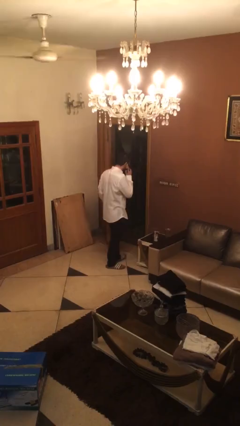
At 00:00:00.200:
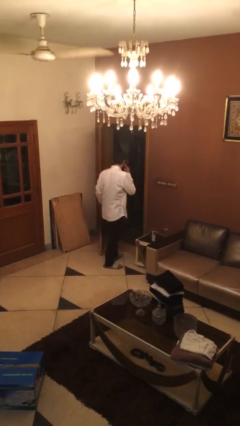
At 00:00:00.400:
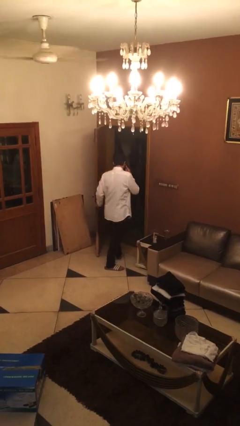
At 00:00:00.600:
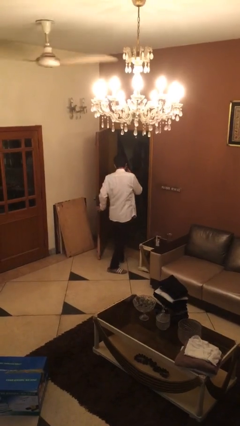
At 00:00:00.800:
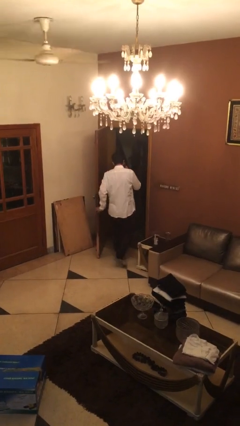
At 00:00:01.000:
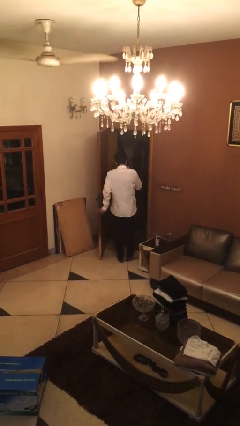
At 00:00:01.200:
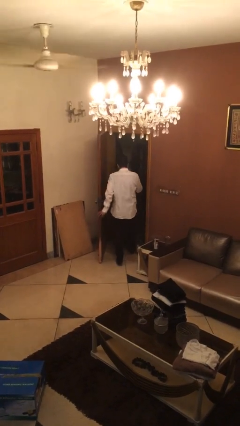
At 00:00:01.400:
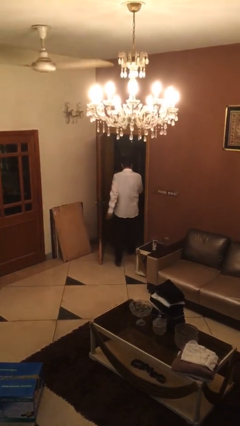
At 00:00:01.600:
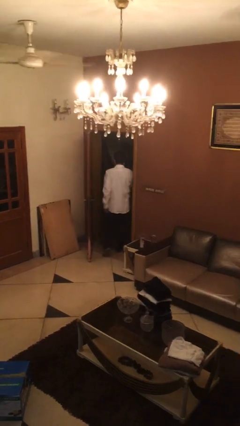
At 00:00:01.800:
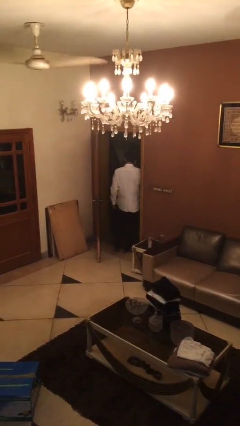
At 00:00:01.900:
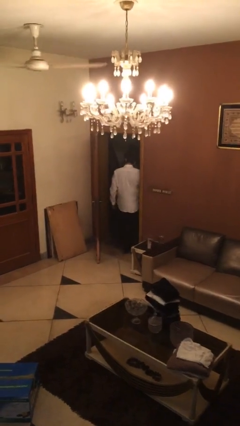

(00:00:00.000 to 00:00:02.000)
person exits scene through structure

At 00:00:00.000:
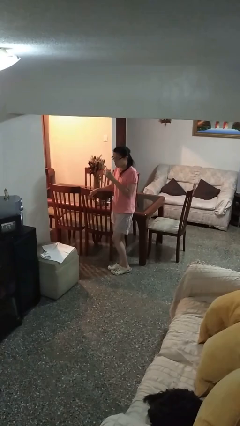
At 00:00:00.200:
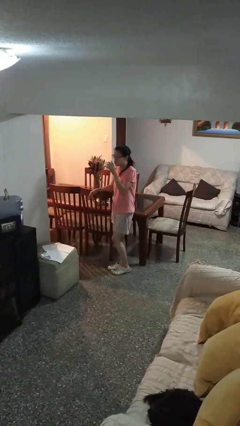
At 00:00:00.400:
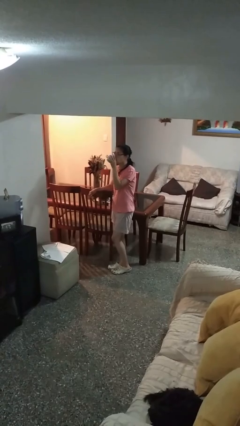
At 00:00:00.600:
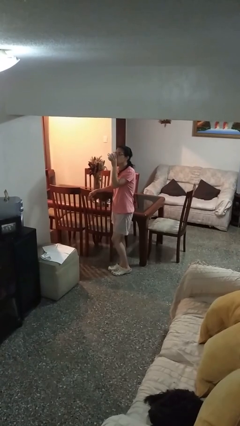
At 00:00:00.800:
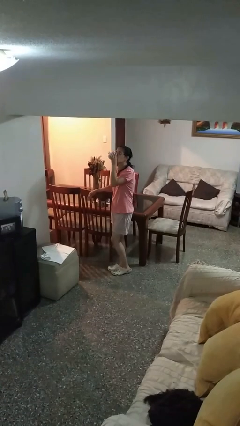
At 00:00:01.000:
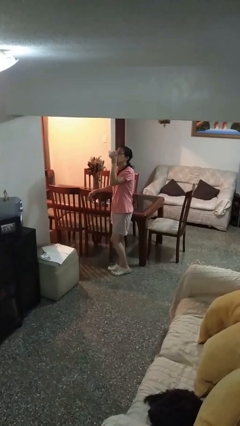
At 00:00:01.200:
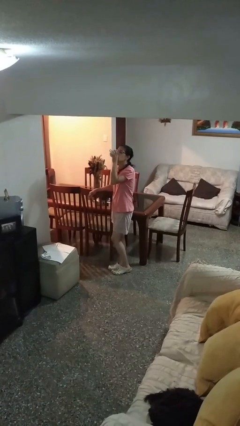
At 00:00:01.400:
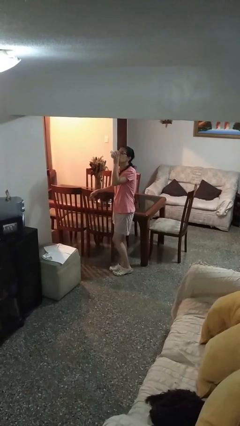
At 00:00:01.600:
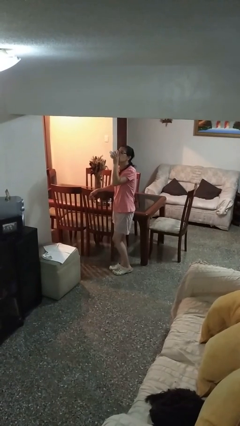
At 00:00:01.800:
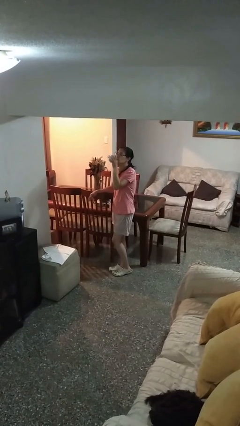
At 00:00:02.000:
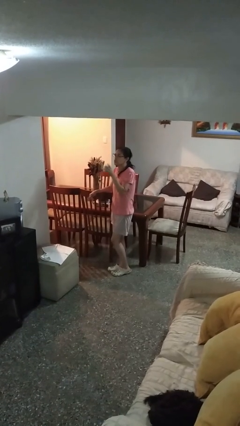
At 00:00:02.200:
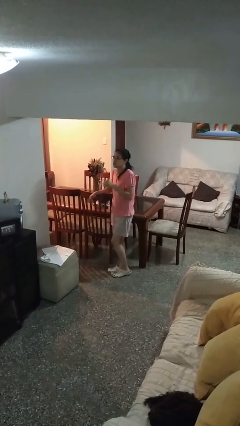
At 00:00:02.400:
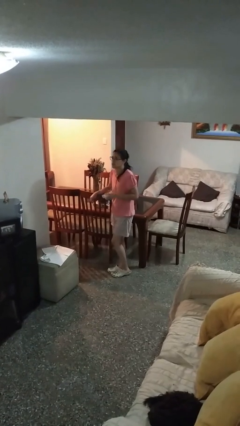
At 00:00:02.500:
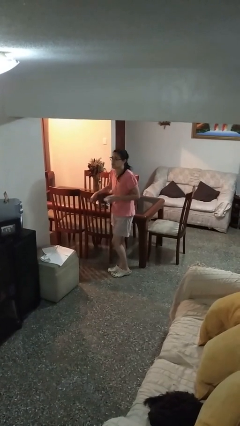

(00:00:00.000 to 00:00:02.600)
person drinks from mug

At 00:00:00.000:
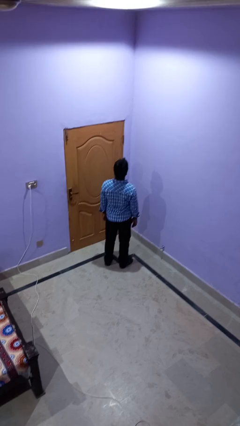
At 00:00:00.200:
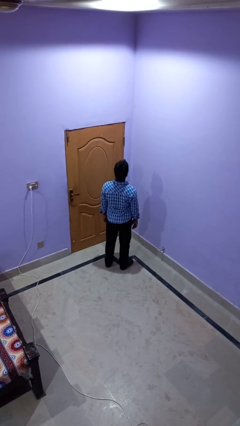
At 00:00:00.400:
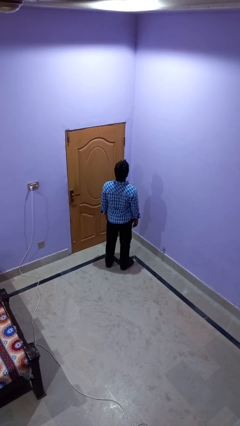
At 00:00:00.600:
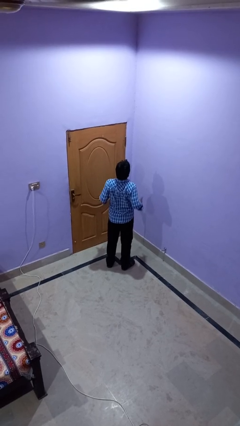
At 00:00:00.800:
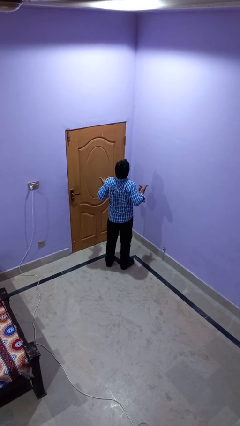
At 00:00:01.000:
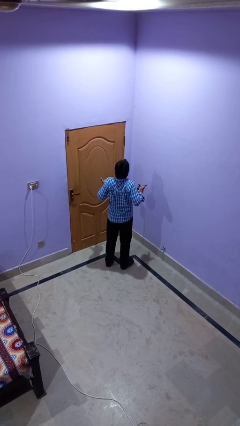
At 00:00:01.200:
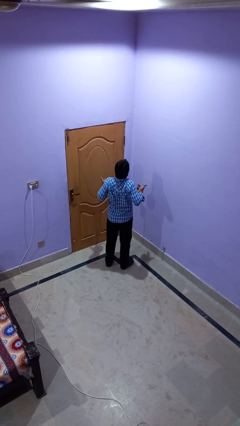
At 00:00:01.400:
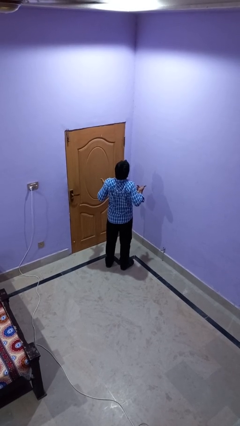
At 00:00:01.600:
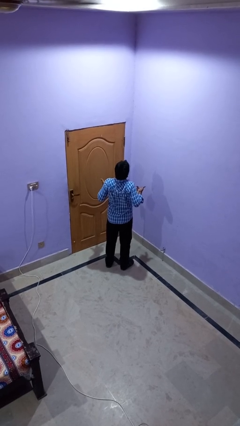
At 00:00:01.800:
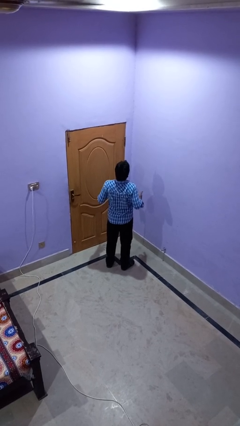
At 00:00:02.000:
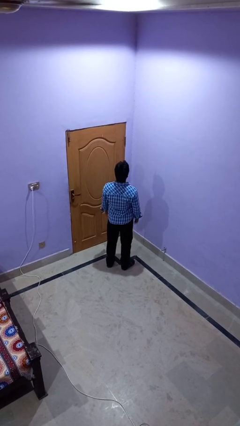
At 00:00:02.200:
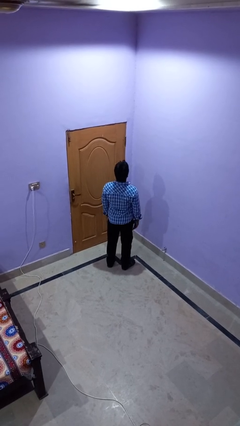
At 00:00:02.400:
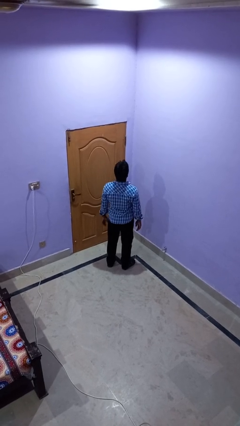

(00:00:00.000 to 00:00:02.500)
person shrugs

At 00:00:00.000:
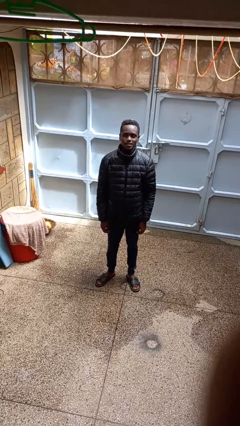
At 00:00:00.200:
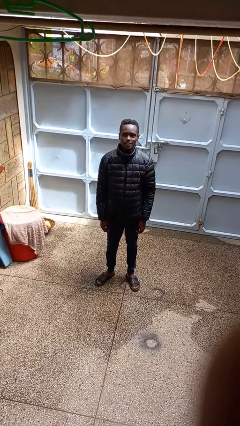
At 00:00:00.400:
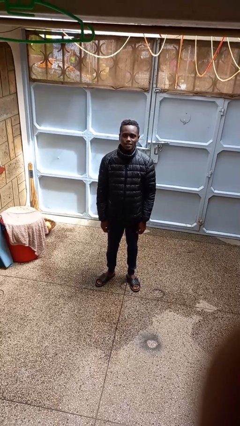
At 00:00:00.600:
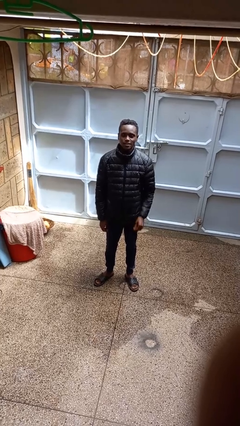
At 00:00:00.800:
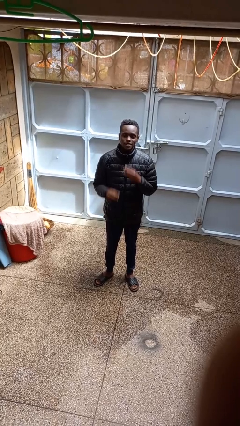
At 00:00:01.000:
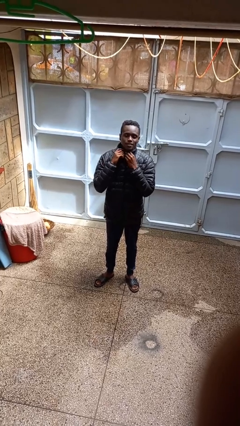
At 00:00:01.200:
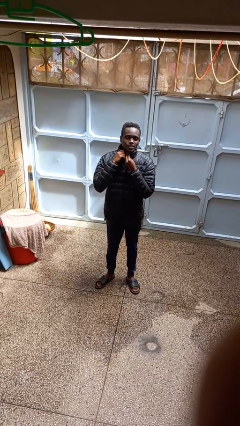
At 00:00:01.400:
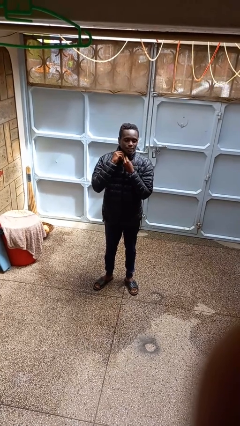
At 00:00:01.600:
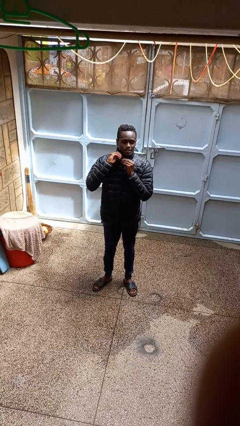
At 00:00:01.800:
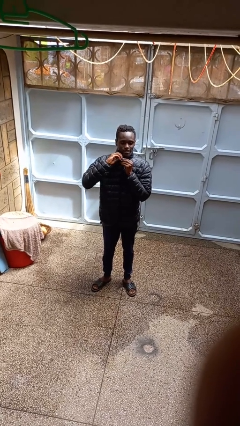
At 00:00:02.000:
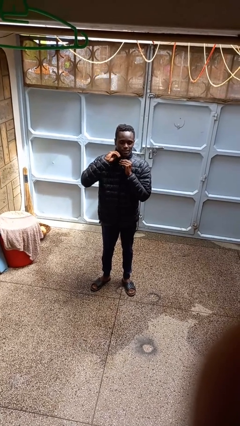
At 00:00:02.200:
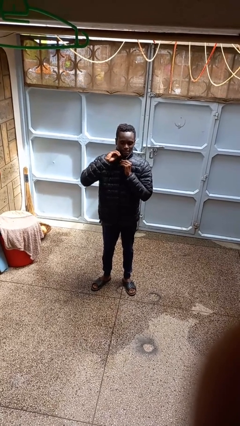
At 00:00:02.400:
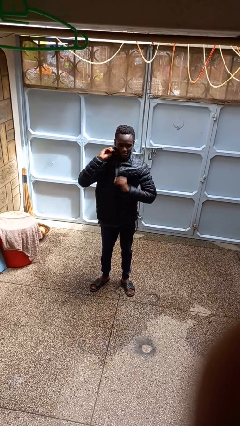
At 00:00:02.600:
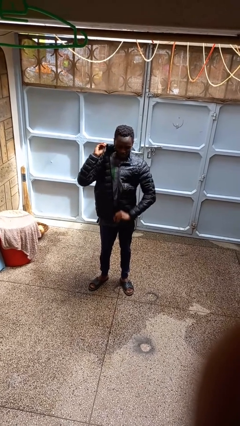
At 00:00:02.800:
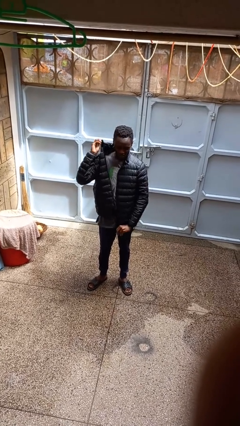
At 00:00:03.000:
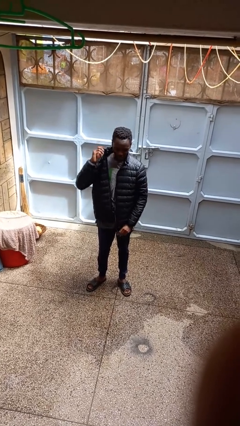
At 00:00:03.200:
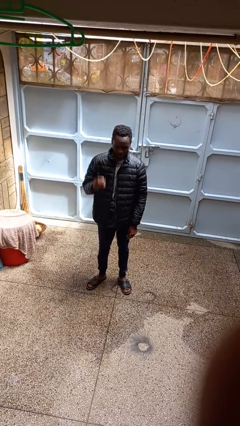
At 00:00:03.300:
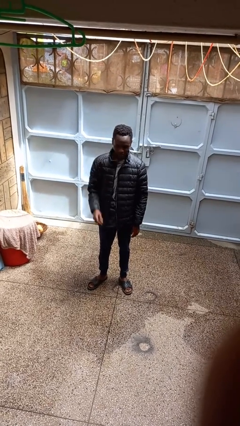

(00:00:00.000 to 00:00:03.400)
person unzips jacket

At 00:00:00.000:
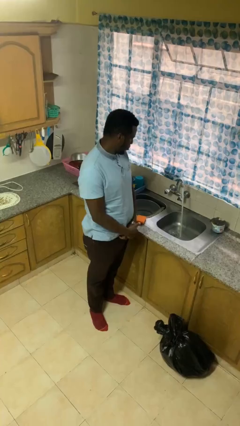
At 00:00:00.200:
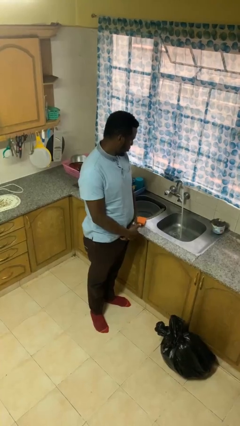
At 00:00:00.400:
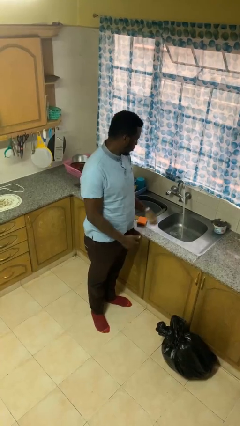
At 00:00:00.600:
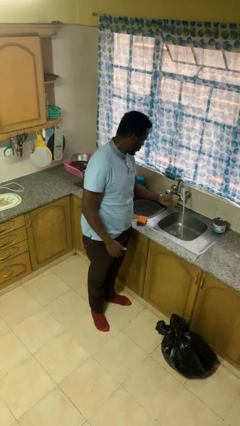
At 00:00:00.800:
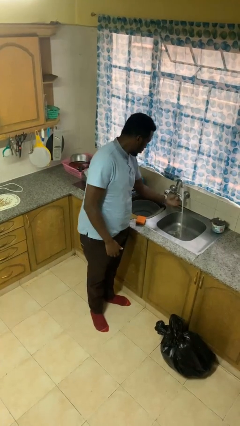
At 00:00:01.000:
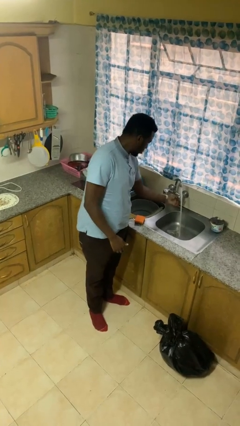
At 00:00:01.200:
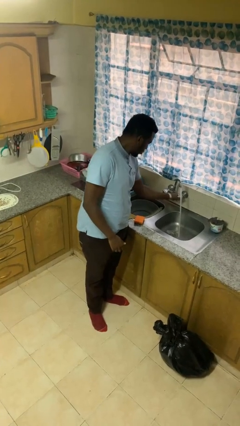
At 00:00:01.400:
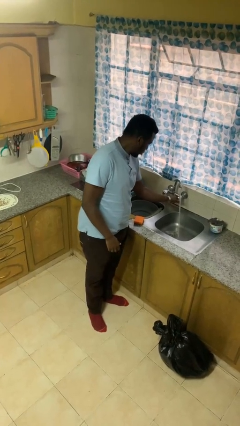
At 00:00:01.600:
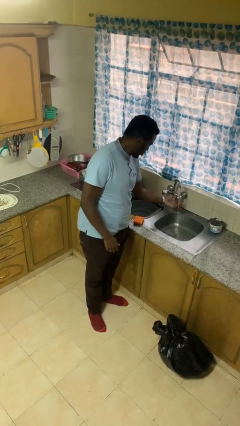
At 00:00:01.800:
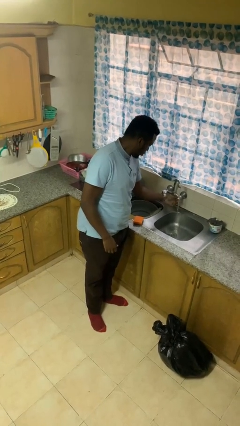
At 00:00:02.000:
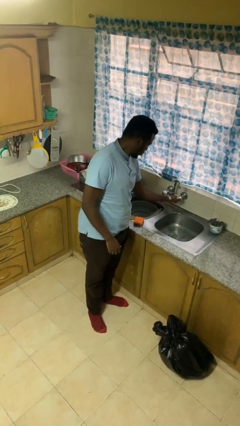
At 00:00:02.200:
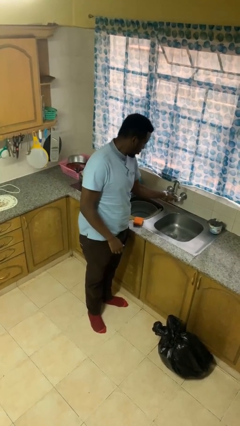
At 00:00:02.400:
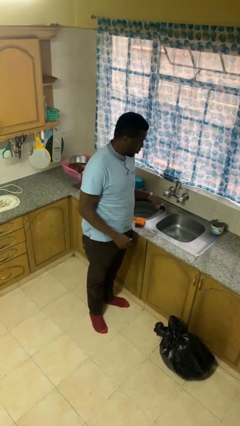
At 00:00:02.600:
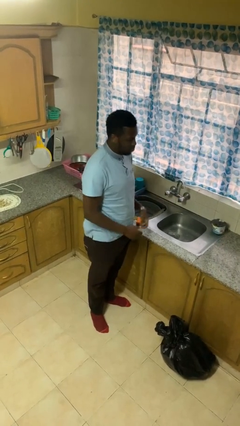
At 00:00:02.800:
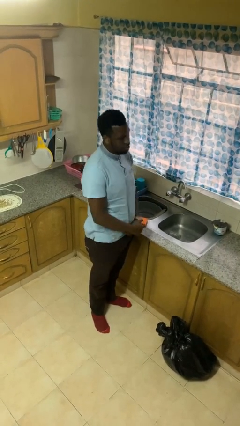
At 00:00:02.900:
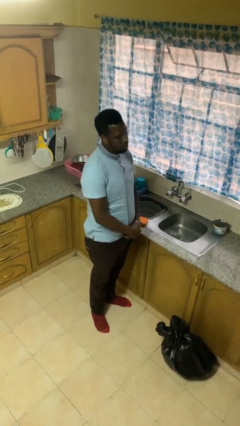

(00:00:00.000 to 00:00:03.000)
person turns off faucet

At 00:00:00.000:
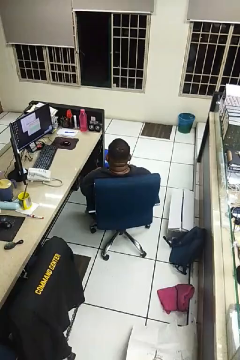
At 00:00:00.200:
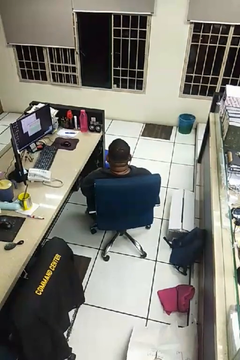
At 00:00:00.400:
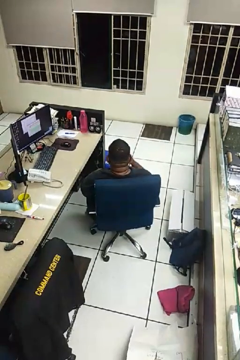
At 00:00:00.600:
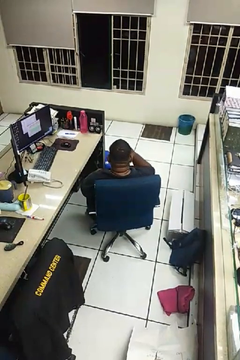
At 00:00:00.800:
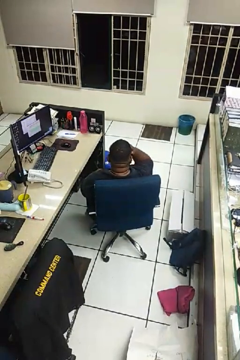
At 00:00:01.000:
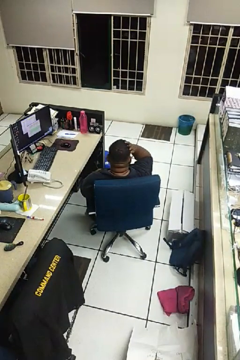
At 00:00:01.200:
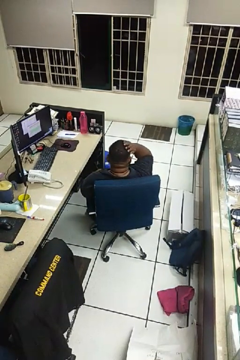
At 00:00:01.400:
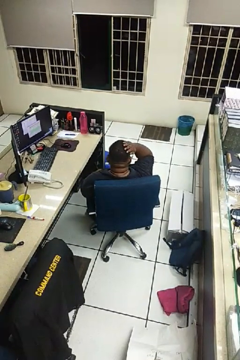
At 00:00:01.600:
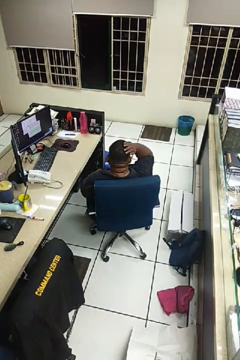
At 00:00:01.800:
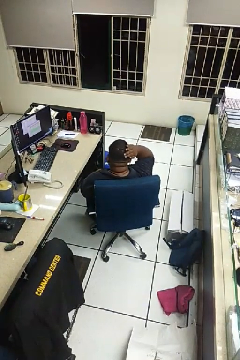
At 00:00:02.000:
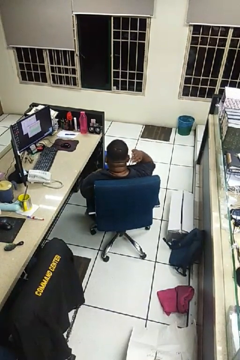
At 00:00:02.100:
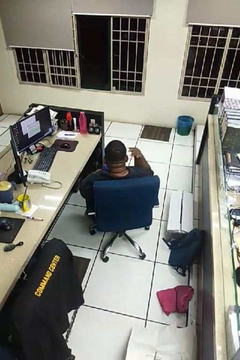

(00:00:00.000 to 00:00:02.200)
person strokes hair

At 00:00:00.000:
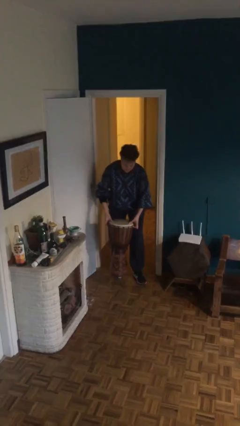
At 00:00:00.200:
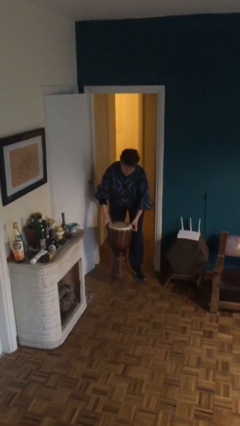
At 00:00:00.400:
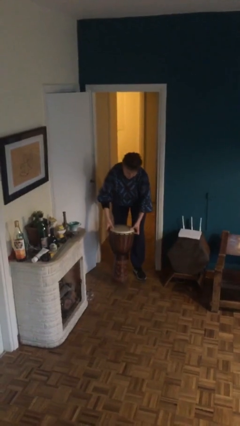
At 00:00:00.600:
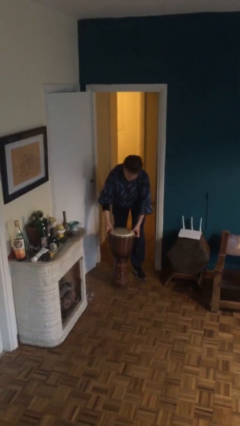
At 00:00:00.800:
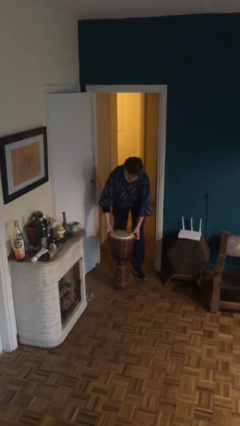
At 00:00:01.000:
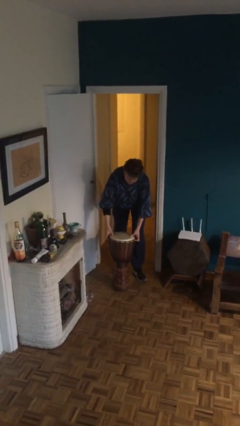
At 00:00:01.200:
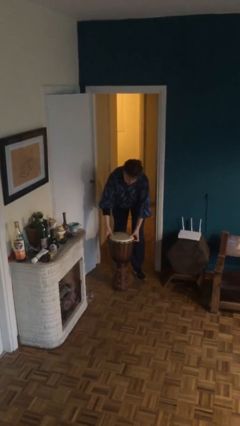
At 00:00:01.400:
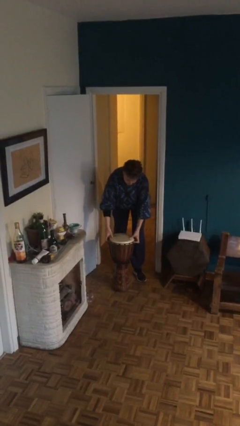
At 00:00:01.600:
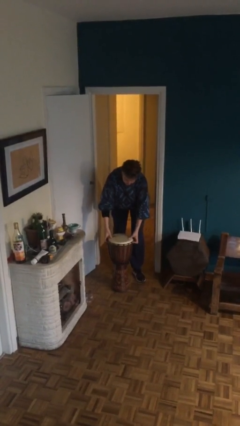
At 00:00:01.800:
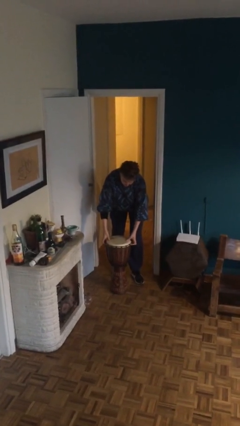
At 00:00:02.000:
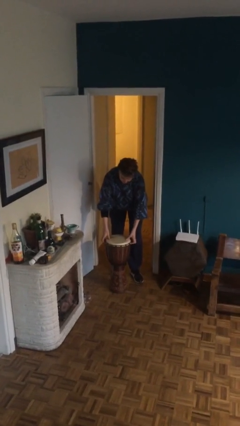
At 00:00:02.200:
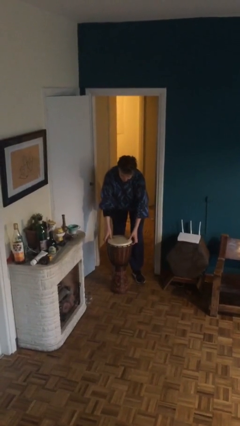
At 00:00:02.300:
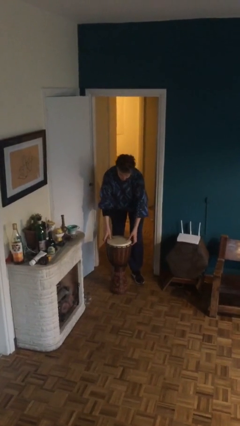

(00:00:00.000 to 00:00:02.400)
person puts down object on floor
